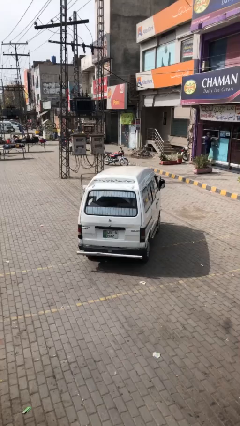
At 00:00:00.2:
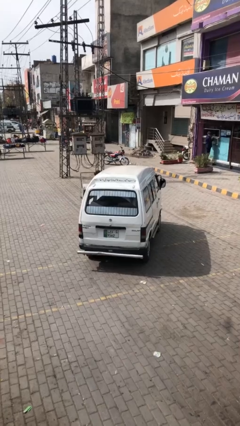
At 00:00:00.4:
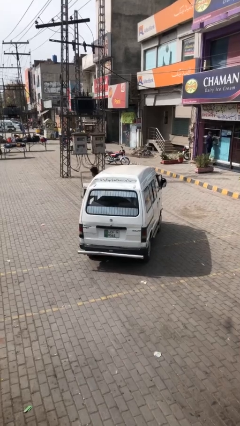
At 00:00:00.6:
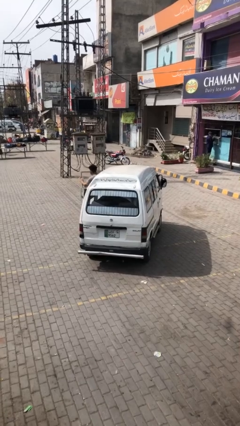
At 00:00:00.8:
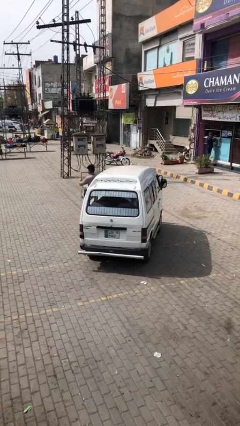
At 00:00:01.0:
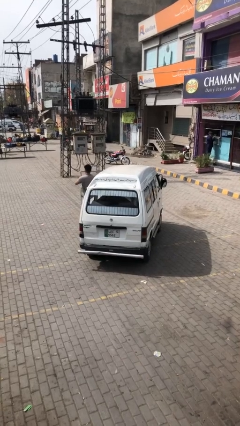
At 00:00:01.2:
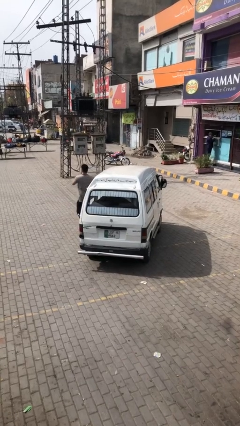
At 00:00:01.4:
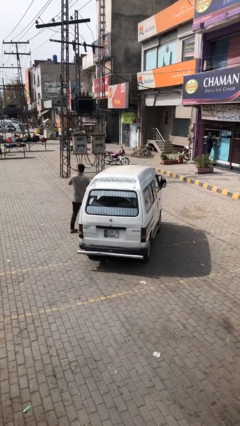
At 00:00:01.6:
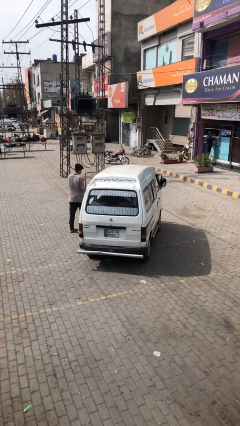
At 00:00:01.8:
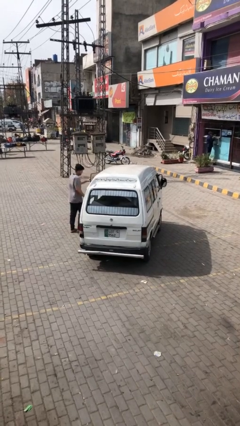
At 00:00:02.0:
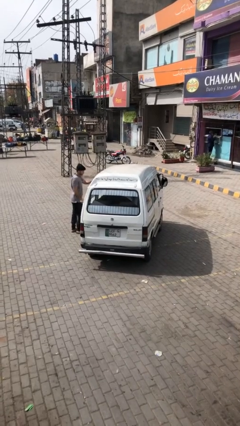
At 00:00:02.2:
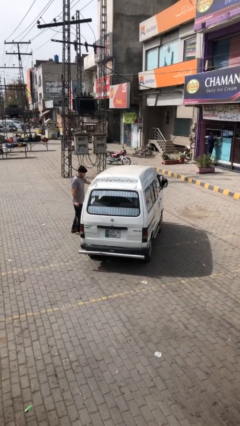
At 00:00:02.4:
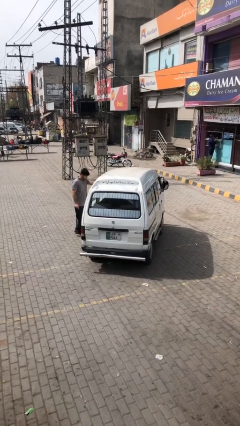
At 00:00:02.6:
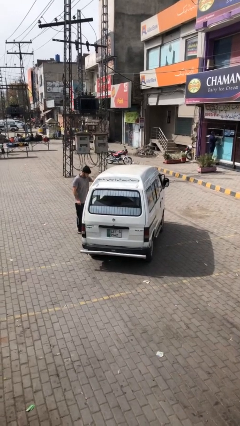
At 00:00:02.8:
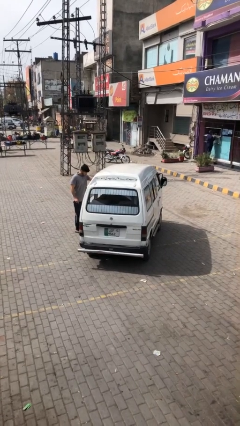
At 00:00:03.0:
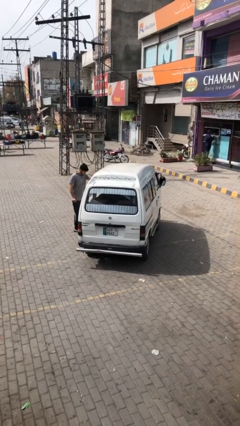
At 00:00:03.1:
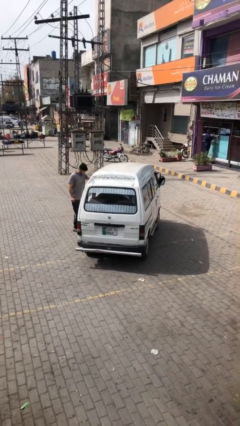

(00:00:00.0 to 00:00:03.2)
car drops off person

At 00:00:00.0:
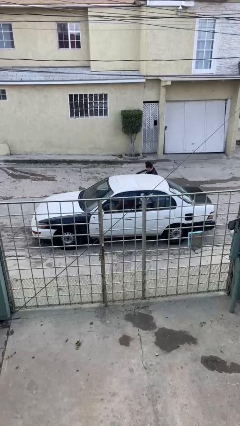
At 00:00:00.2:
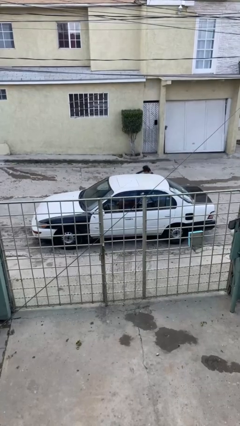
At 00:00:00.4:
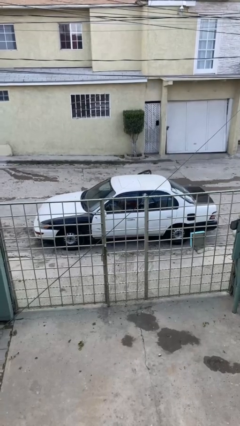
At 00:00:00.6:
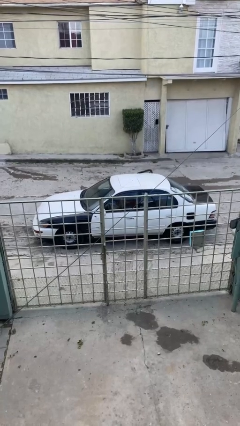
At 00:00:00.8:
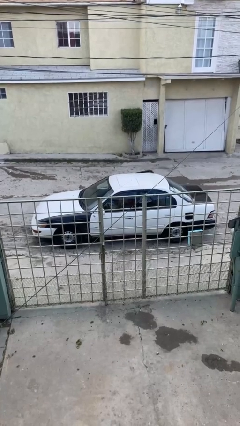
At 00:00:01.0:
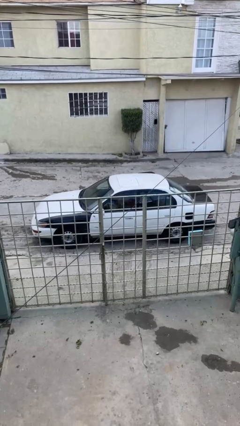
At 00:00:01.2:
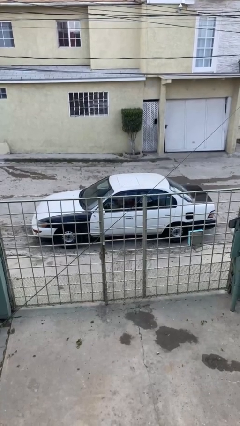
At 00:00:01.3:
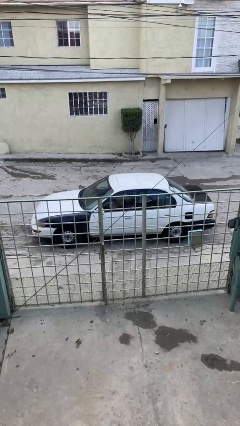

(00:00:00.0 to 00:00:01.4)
car picks up person

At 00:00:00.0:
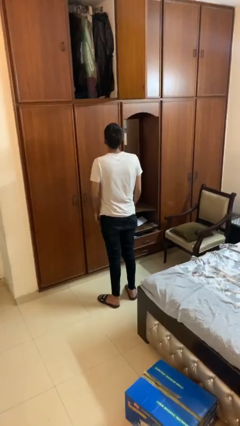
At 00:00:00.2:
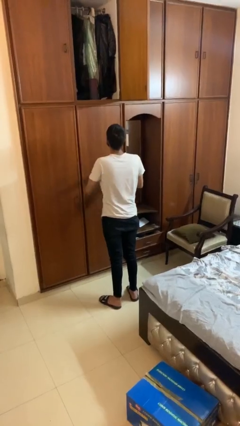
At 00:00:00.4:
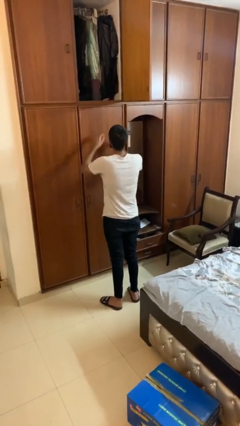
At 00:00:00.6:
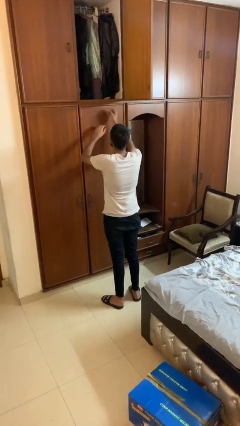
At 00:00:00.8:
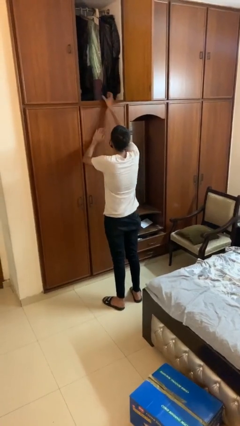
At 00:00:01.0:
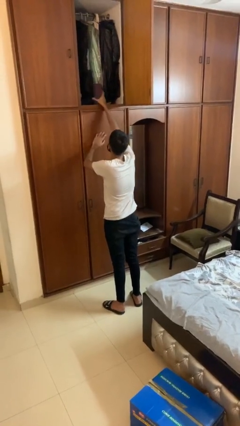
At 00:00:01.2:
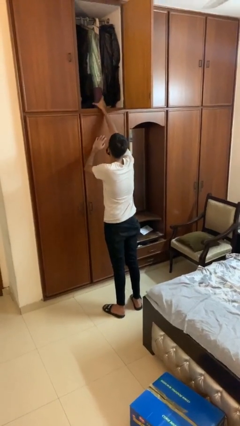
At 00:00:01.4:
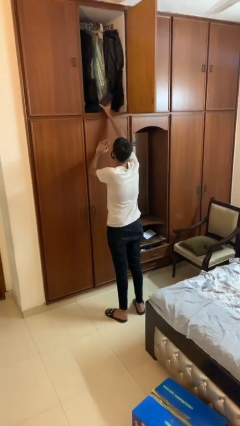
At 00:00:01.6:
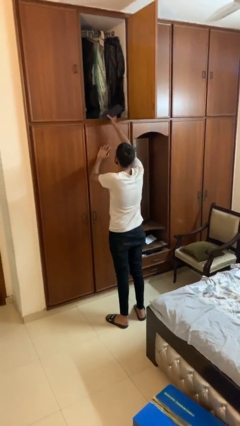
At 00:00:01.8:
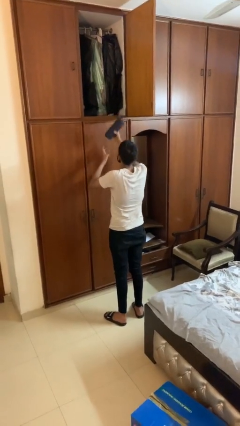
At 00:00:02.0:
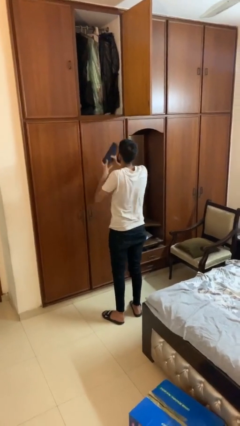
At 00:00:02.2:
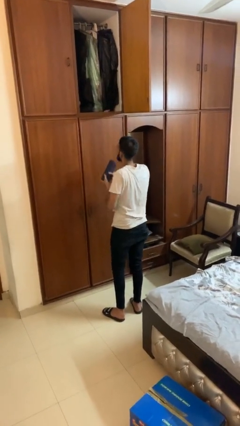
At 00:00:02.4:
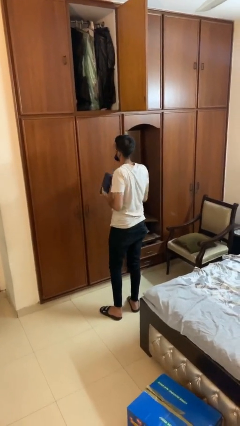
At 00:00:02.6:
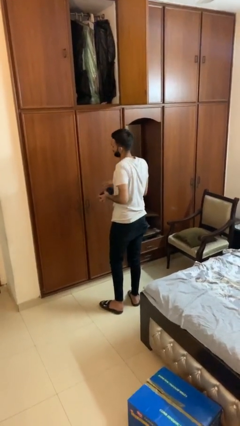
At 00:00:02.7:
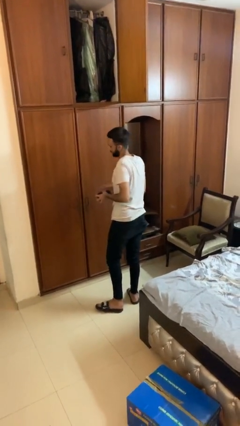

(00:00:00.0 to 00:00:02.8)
person picks up object from shelf

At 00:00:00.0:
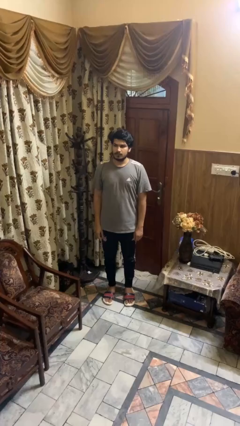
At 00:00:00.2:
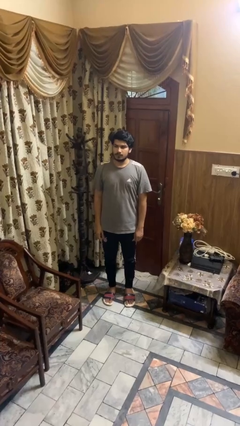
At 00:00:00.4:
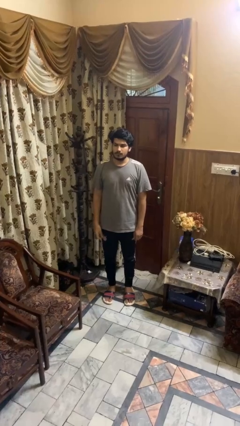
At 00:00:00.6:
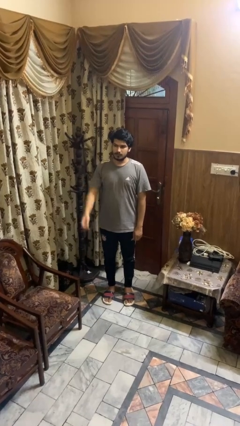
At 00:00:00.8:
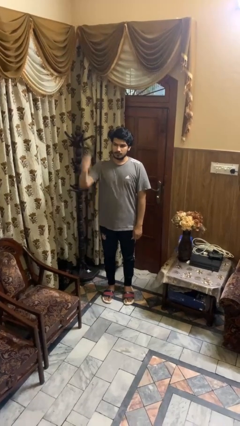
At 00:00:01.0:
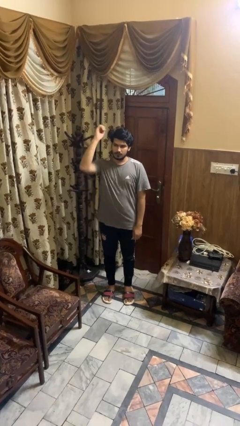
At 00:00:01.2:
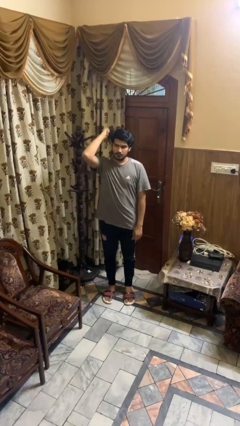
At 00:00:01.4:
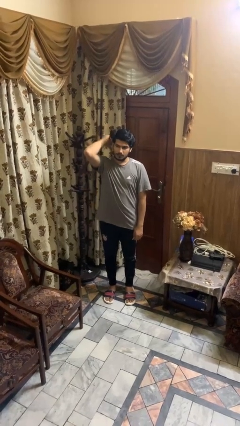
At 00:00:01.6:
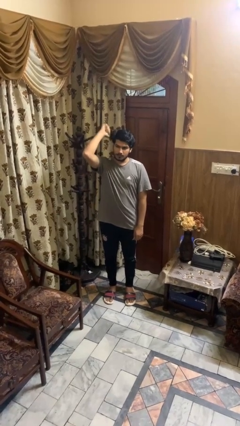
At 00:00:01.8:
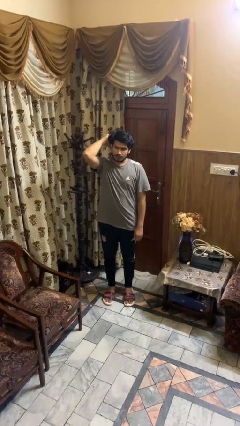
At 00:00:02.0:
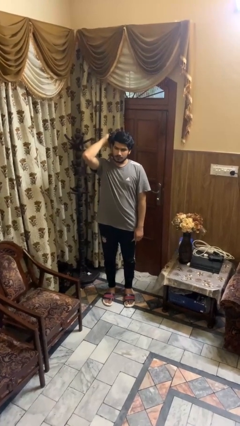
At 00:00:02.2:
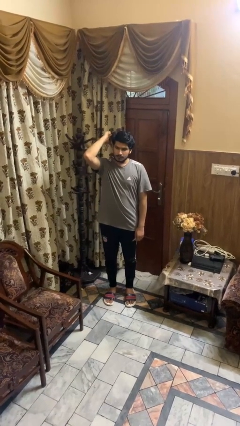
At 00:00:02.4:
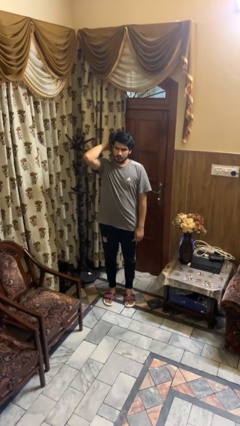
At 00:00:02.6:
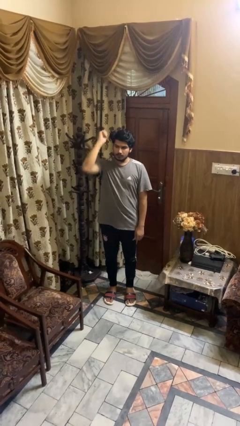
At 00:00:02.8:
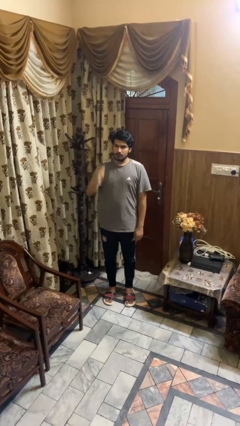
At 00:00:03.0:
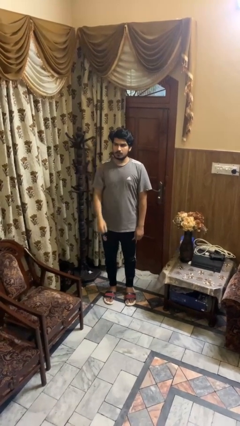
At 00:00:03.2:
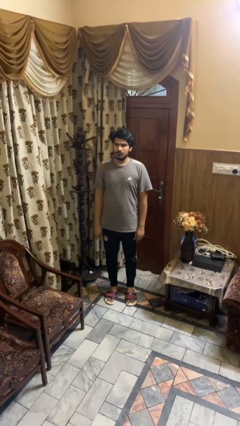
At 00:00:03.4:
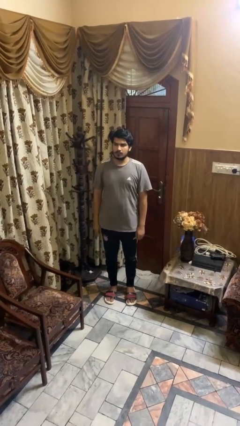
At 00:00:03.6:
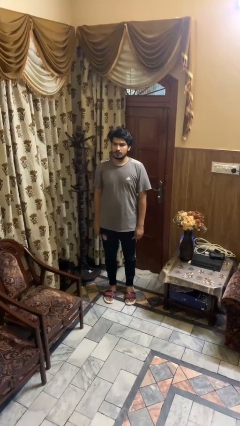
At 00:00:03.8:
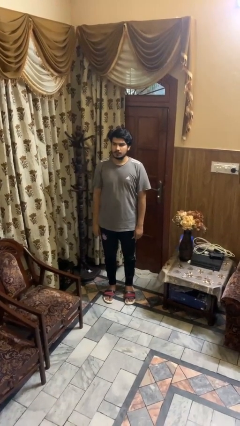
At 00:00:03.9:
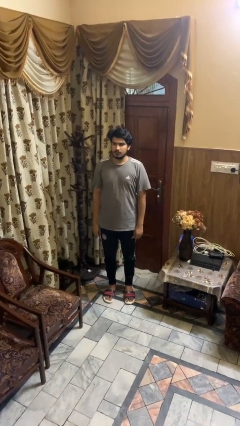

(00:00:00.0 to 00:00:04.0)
person gestures behind me

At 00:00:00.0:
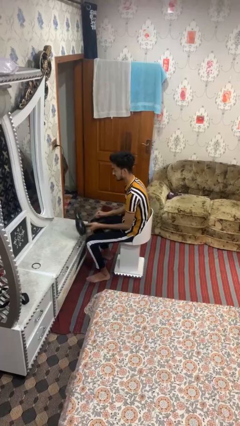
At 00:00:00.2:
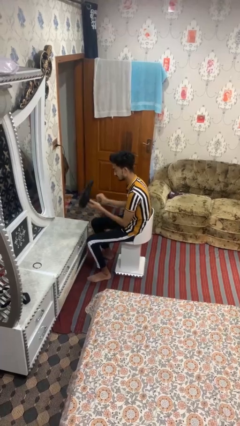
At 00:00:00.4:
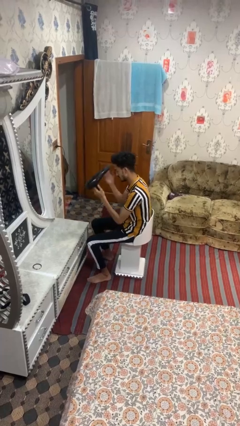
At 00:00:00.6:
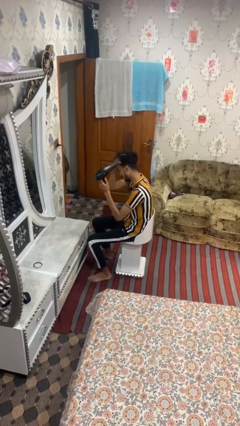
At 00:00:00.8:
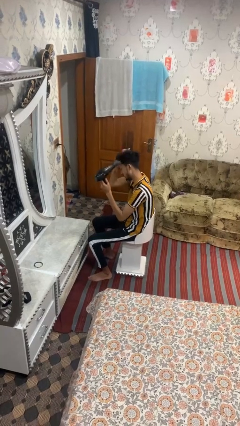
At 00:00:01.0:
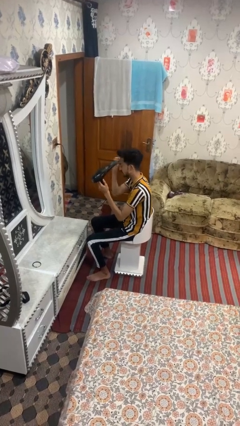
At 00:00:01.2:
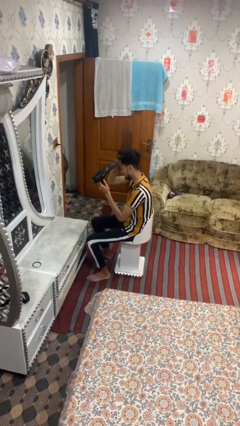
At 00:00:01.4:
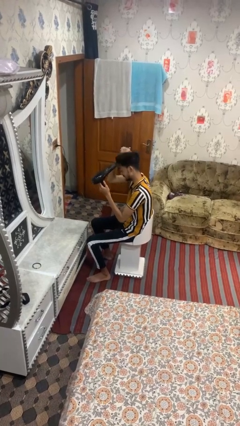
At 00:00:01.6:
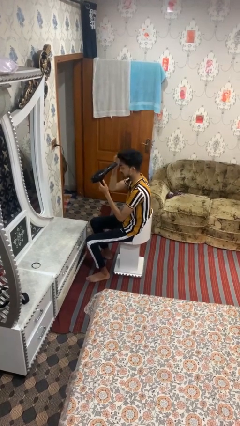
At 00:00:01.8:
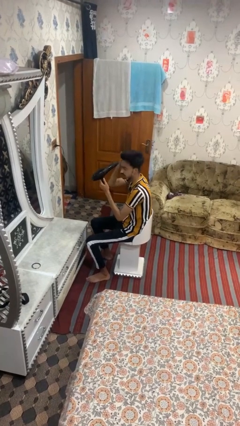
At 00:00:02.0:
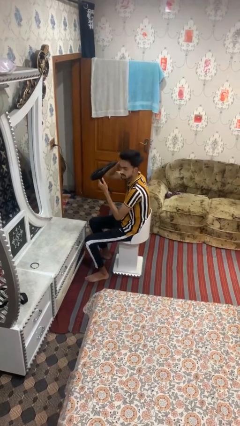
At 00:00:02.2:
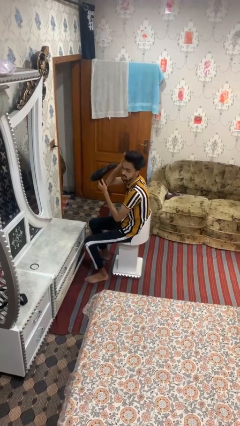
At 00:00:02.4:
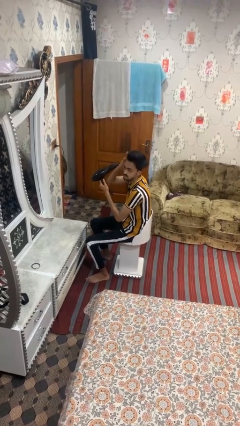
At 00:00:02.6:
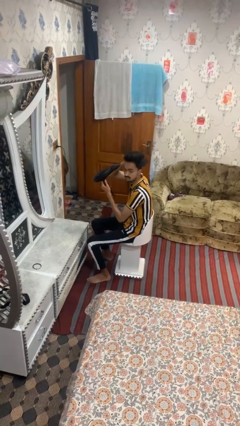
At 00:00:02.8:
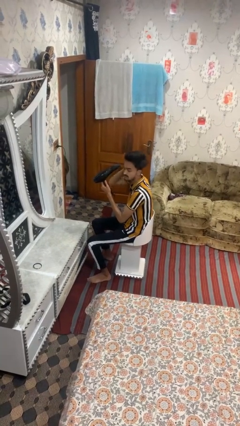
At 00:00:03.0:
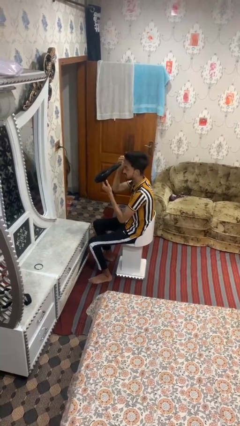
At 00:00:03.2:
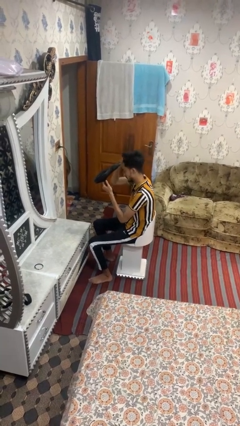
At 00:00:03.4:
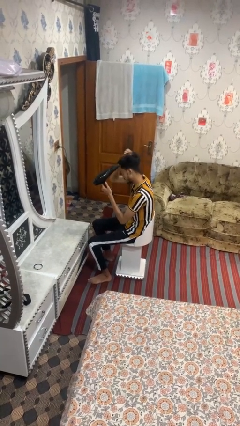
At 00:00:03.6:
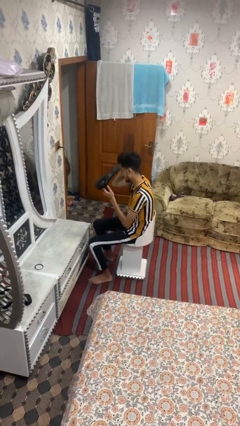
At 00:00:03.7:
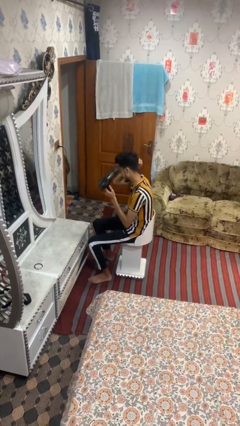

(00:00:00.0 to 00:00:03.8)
person dries hair with hairdryer

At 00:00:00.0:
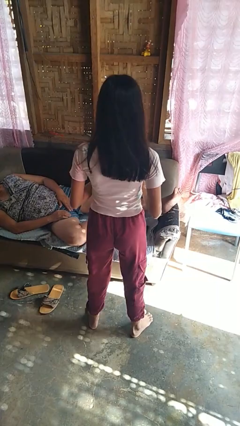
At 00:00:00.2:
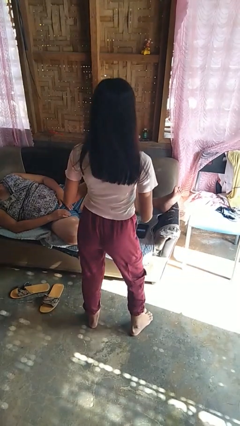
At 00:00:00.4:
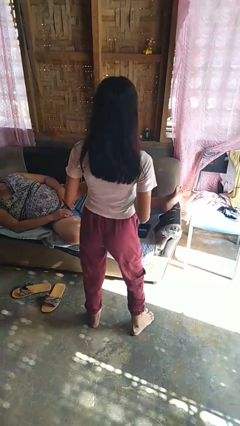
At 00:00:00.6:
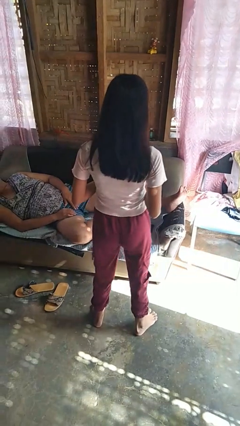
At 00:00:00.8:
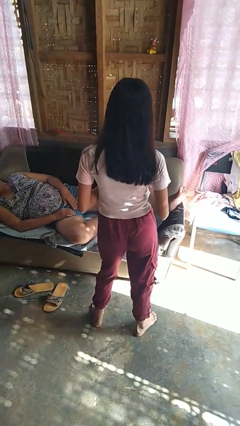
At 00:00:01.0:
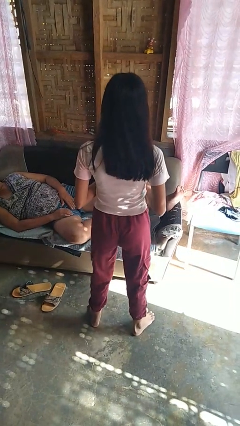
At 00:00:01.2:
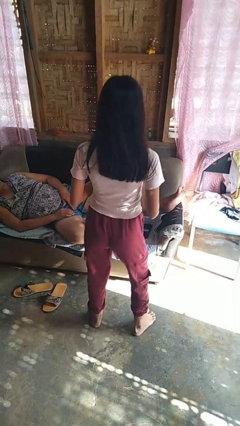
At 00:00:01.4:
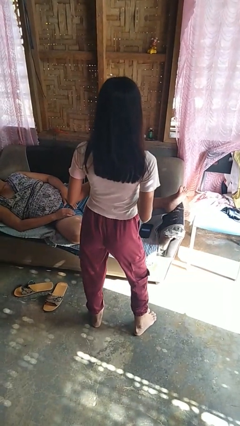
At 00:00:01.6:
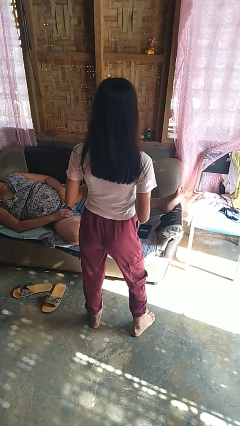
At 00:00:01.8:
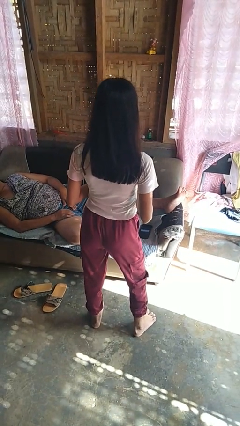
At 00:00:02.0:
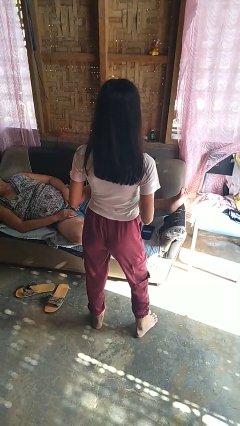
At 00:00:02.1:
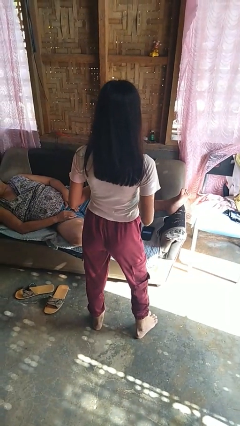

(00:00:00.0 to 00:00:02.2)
person wiggles hips
